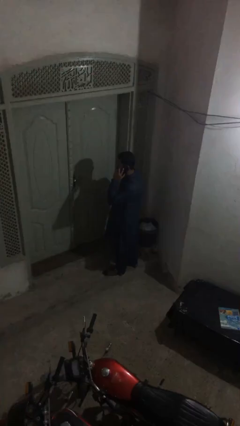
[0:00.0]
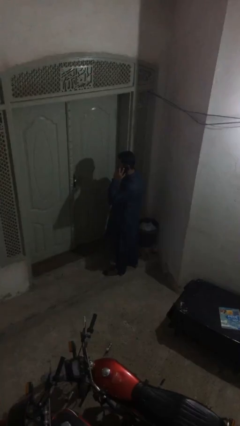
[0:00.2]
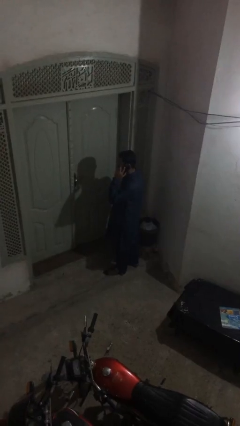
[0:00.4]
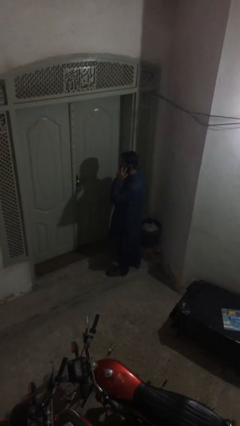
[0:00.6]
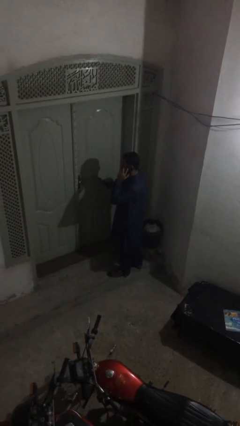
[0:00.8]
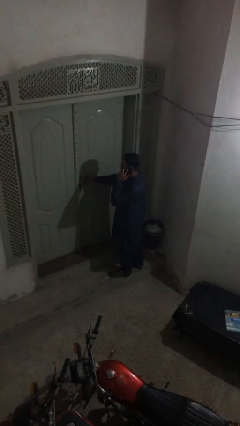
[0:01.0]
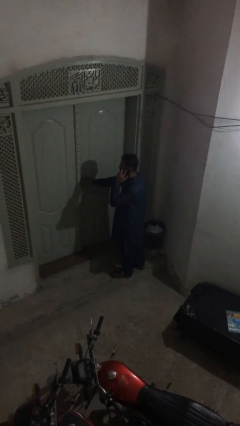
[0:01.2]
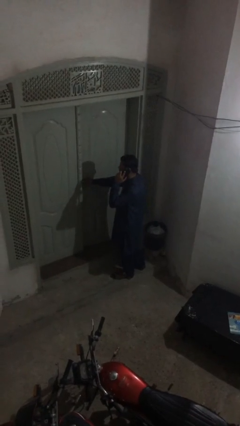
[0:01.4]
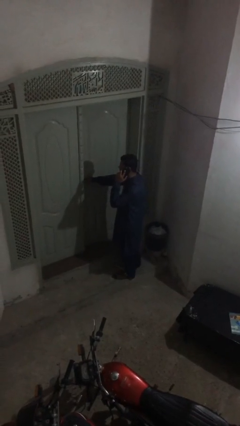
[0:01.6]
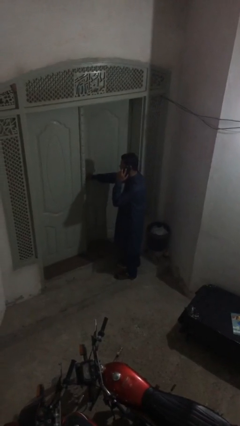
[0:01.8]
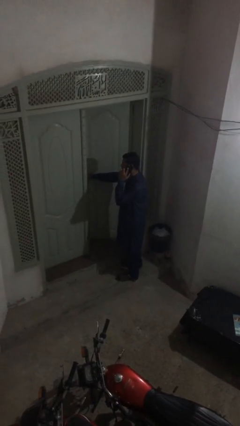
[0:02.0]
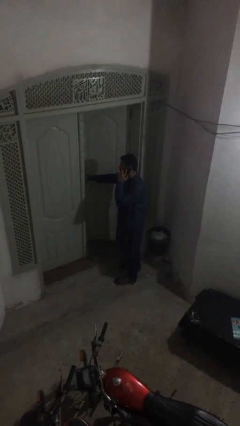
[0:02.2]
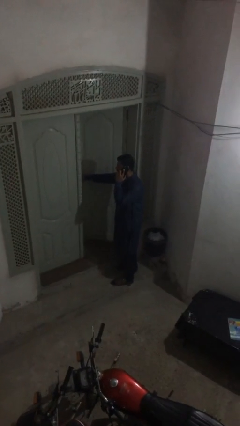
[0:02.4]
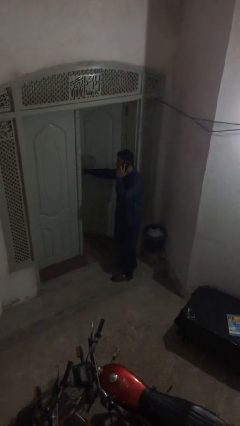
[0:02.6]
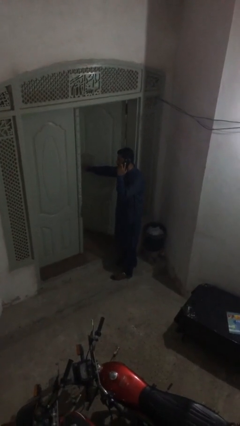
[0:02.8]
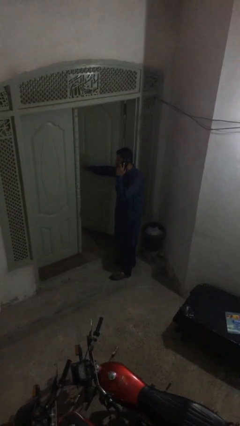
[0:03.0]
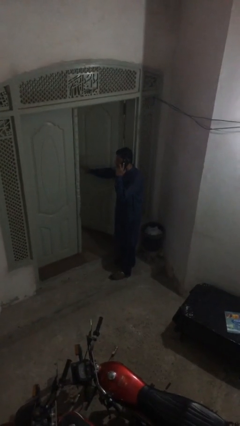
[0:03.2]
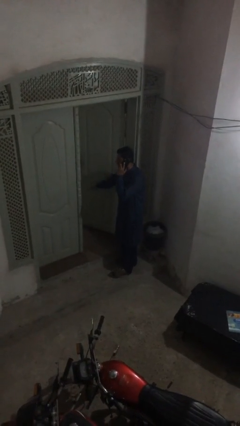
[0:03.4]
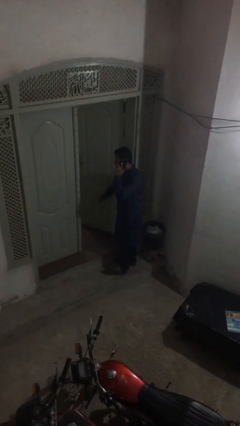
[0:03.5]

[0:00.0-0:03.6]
person opens facility door

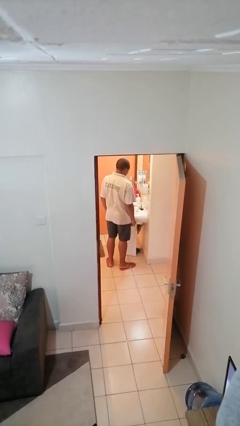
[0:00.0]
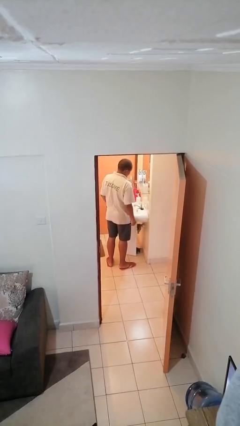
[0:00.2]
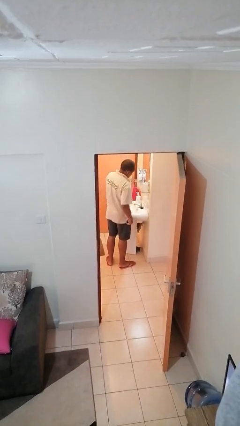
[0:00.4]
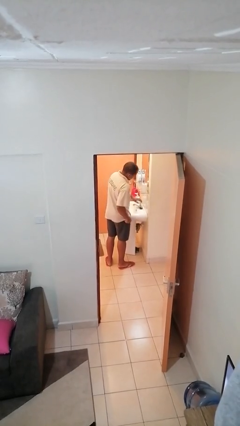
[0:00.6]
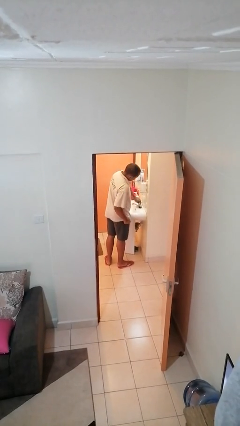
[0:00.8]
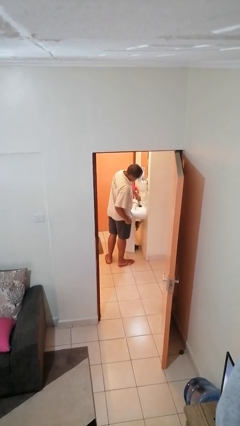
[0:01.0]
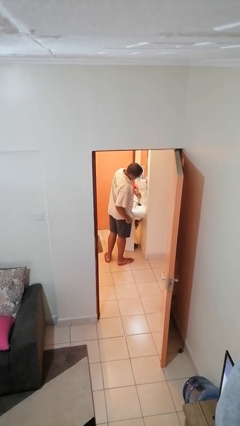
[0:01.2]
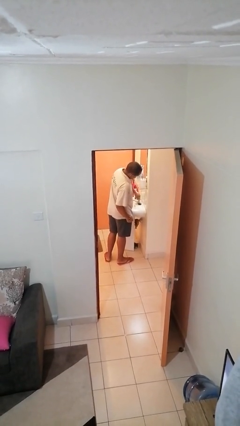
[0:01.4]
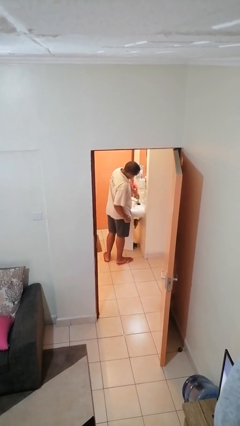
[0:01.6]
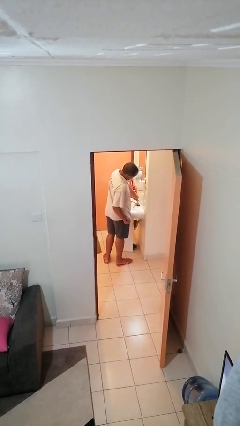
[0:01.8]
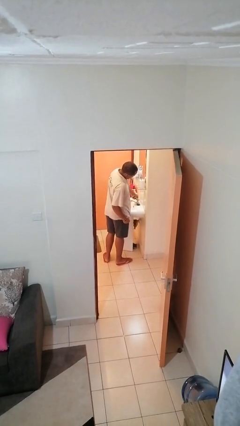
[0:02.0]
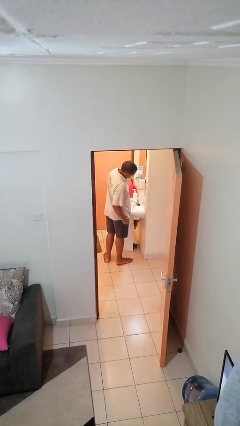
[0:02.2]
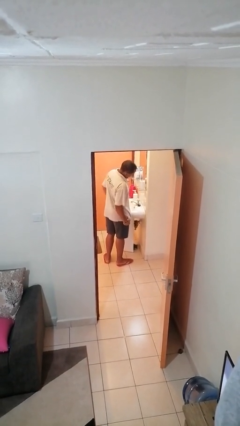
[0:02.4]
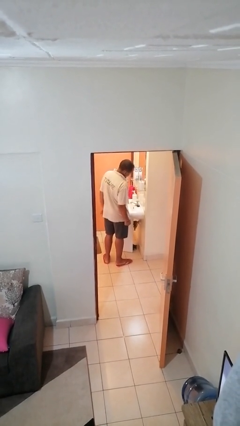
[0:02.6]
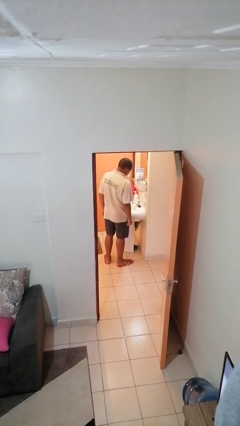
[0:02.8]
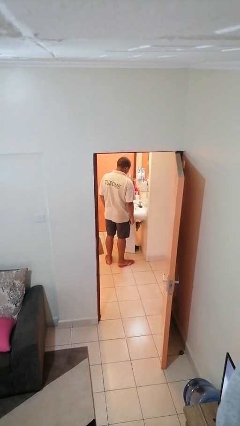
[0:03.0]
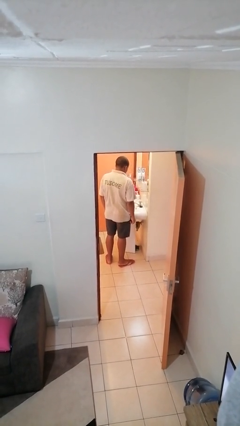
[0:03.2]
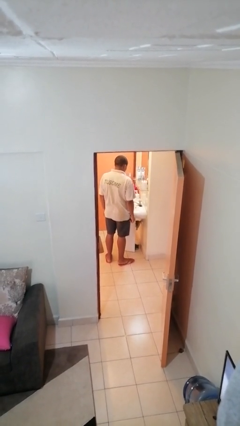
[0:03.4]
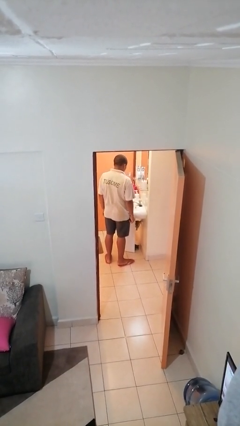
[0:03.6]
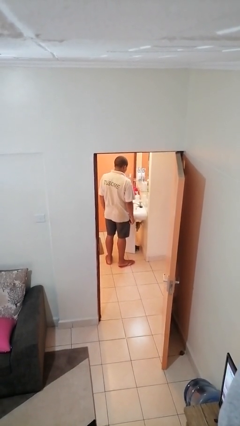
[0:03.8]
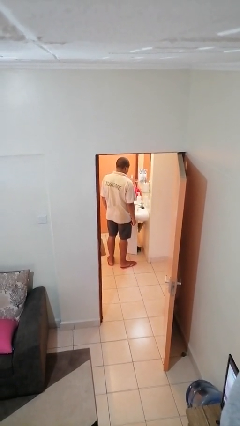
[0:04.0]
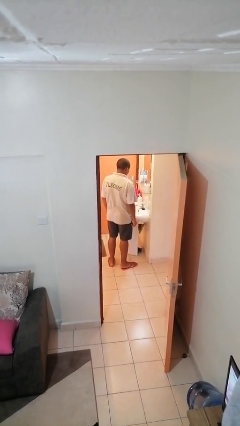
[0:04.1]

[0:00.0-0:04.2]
person turns on faucet

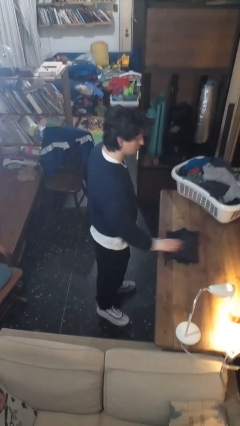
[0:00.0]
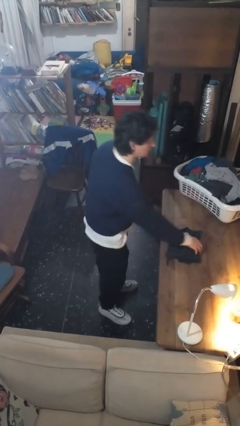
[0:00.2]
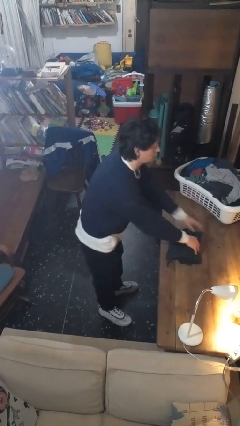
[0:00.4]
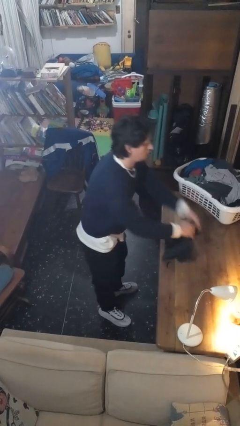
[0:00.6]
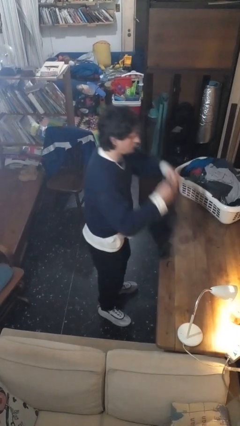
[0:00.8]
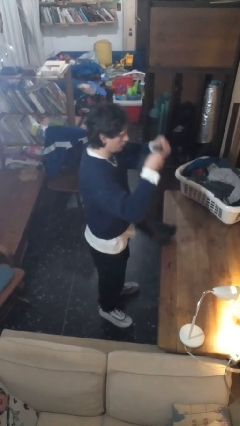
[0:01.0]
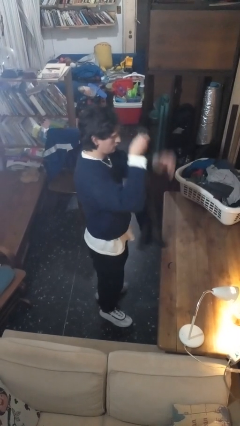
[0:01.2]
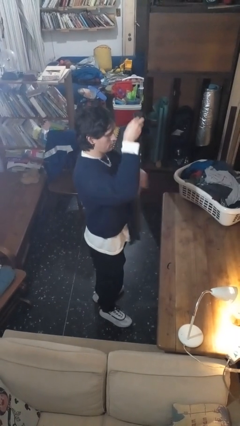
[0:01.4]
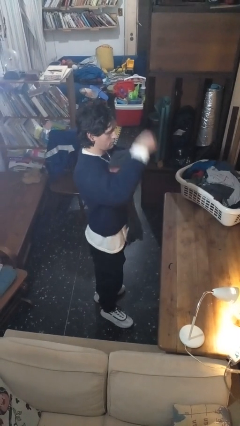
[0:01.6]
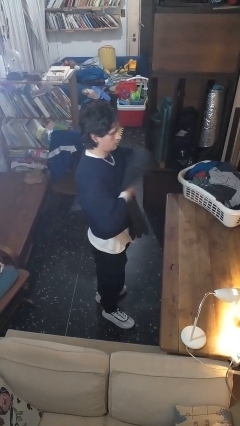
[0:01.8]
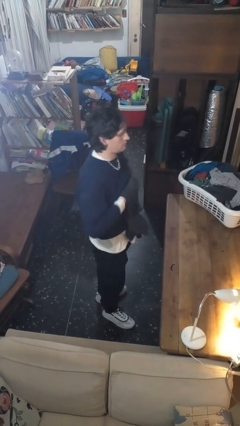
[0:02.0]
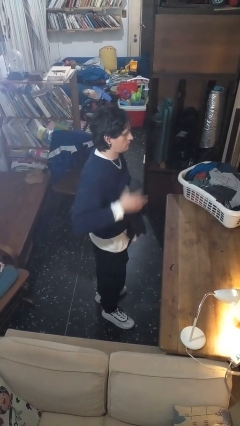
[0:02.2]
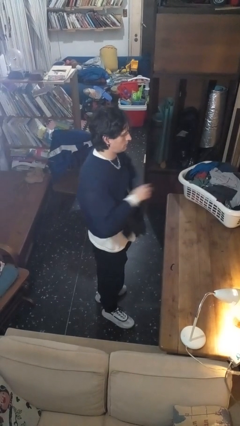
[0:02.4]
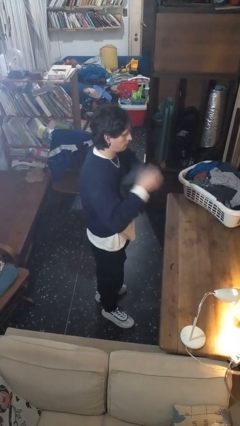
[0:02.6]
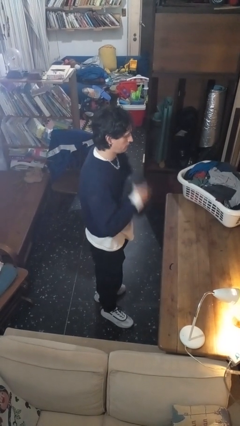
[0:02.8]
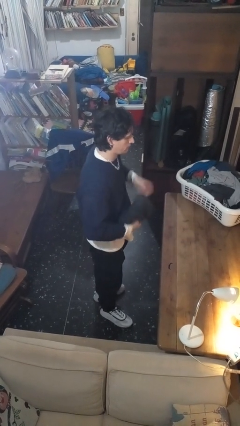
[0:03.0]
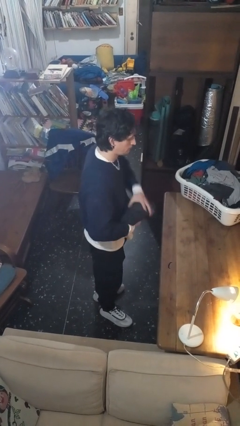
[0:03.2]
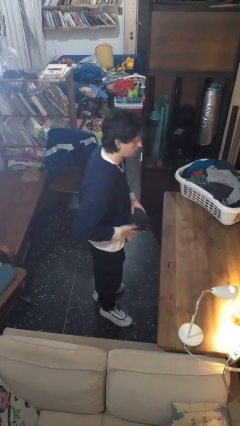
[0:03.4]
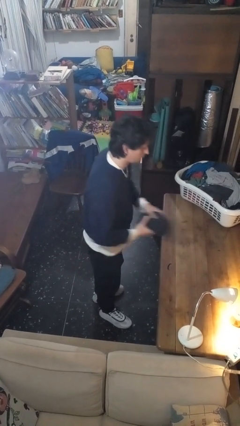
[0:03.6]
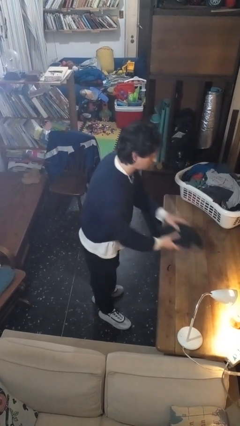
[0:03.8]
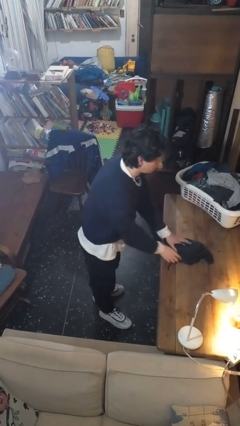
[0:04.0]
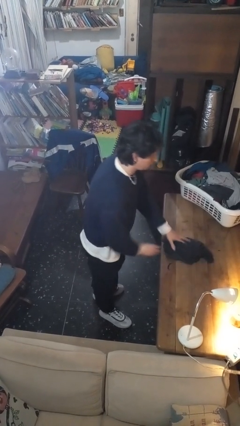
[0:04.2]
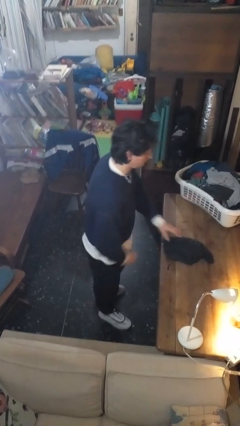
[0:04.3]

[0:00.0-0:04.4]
person folds pants

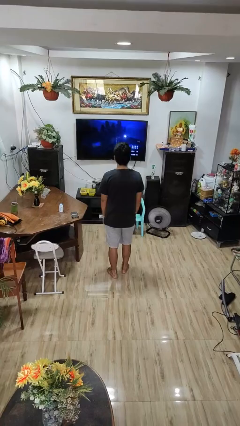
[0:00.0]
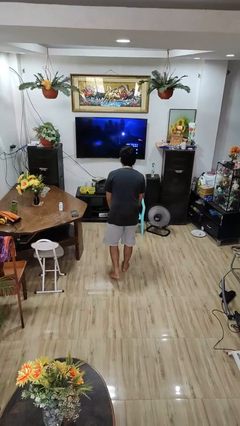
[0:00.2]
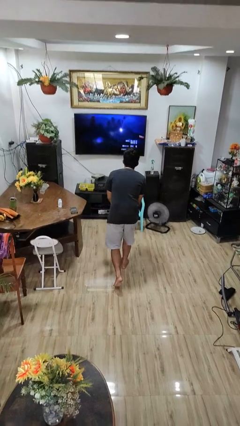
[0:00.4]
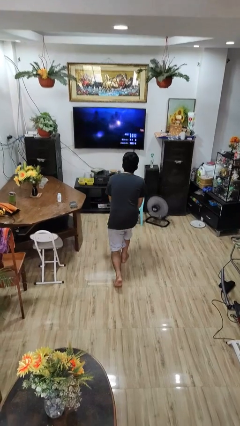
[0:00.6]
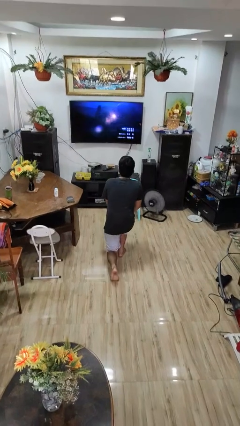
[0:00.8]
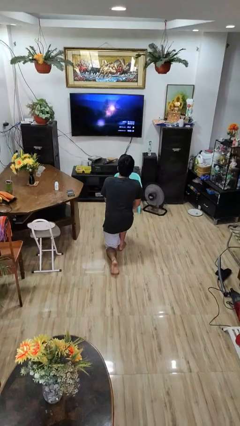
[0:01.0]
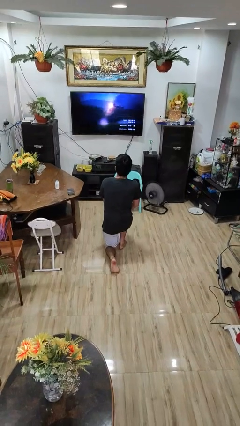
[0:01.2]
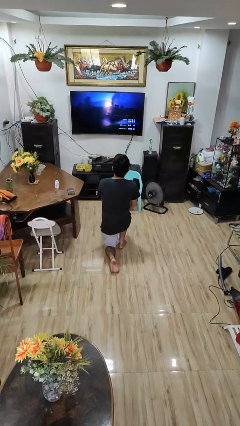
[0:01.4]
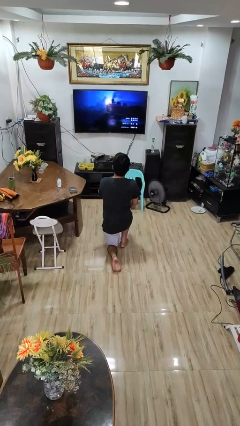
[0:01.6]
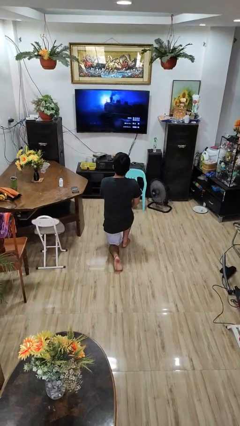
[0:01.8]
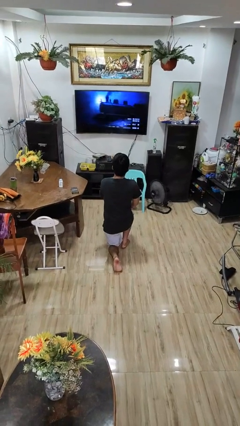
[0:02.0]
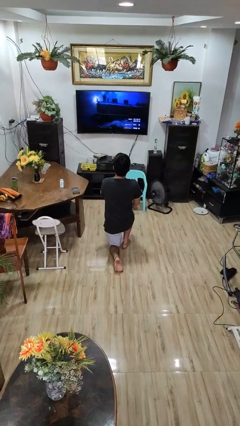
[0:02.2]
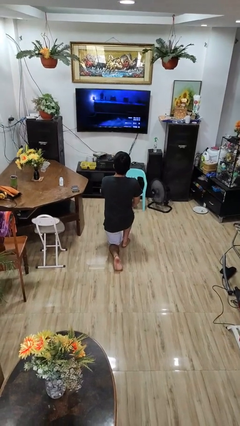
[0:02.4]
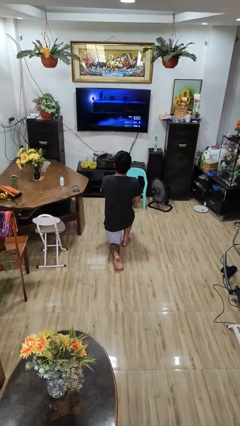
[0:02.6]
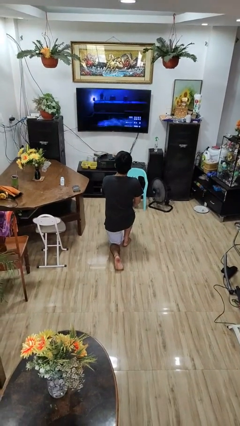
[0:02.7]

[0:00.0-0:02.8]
person kneels

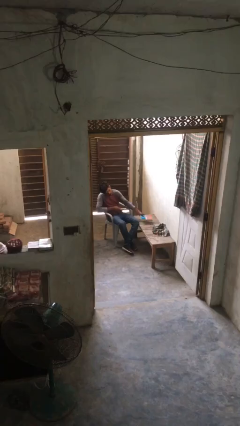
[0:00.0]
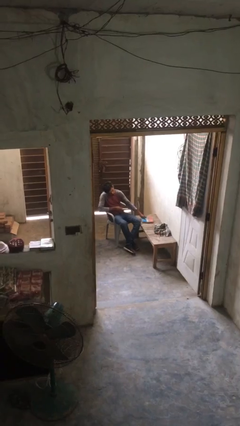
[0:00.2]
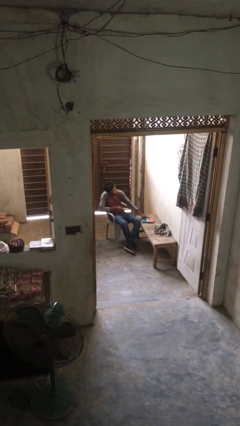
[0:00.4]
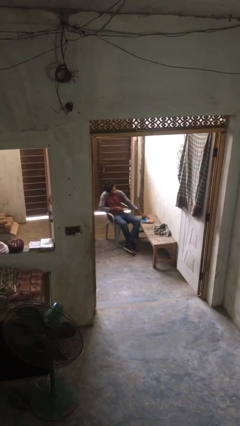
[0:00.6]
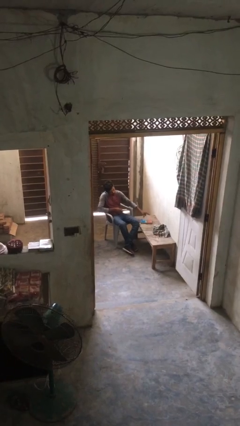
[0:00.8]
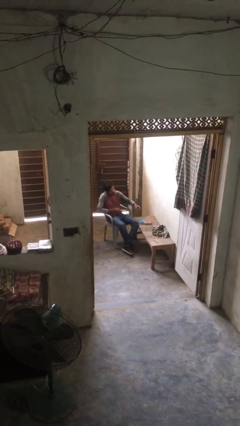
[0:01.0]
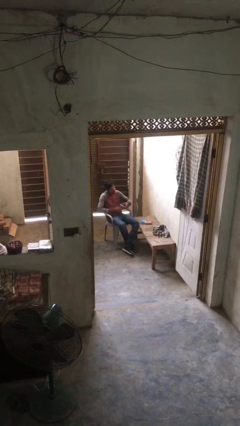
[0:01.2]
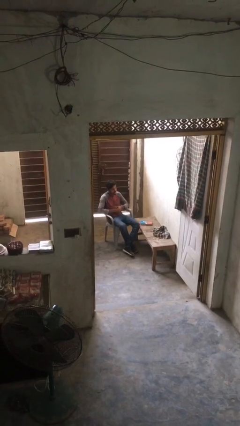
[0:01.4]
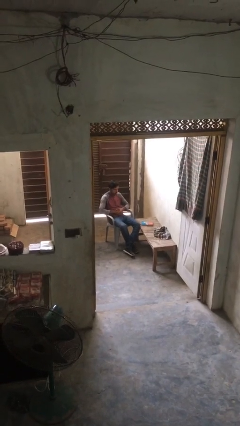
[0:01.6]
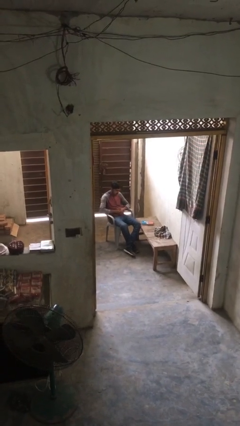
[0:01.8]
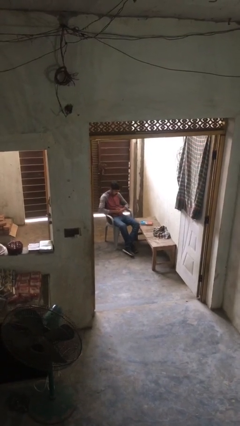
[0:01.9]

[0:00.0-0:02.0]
person puts down object on table

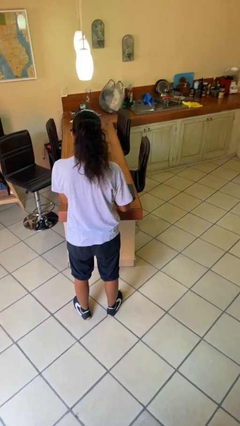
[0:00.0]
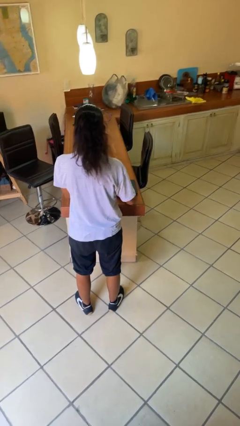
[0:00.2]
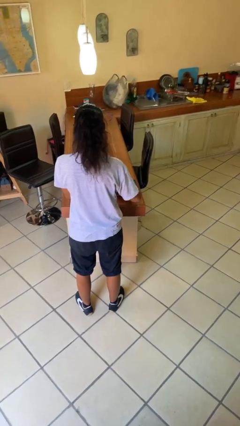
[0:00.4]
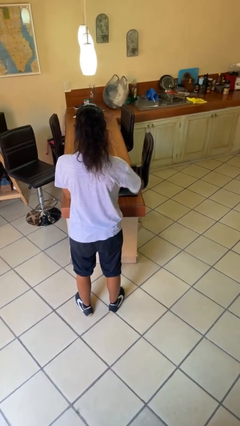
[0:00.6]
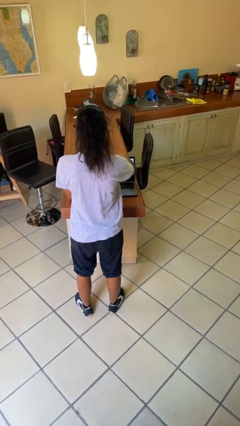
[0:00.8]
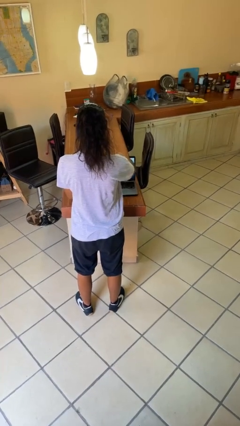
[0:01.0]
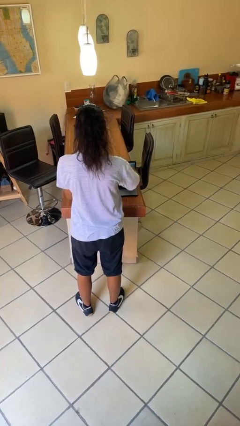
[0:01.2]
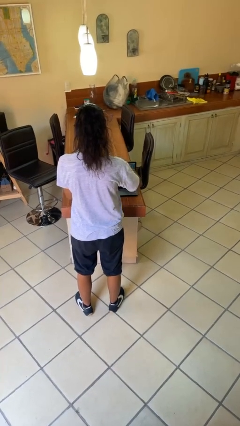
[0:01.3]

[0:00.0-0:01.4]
person opens laptop
